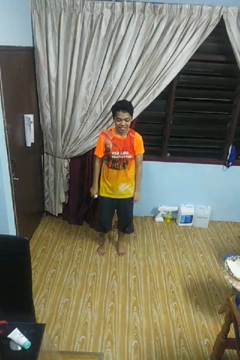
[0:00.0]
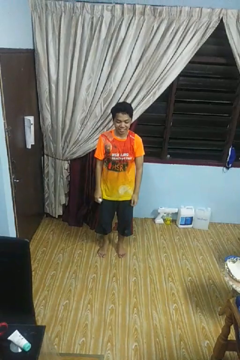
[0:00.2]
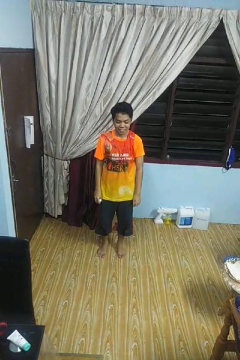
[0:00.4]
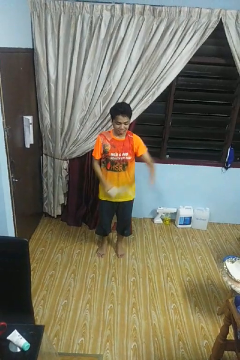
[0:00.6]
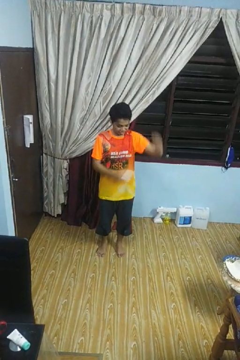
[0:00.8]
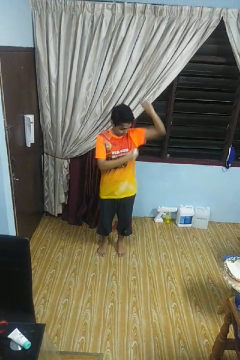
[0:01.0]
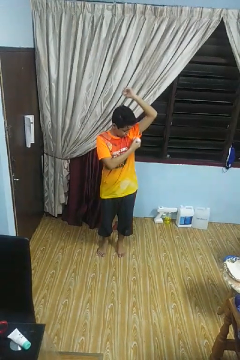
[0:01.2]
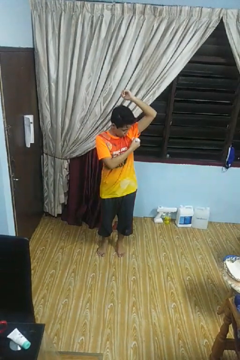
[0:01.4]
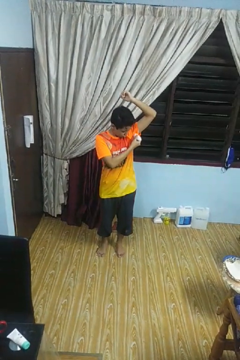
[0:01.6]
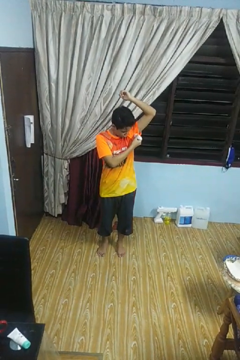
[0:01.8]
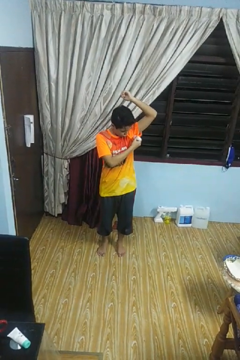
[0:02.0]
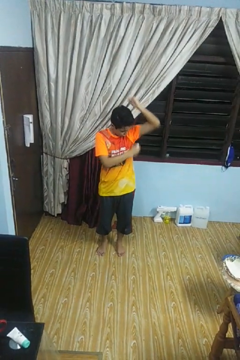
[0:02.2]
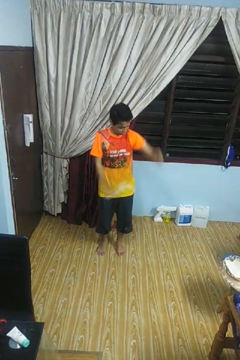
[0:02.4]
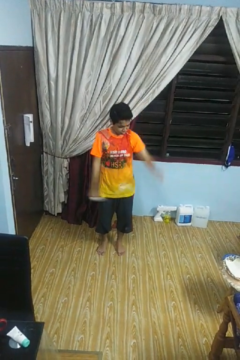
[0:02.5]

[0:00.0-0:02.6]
person applies deodorant

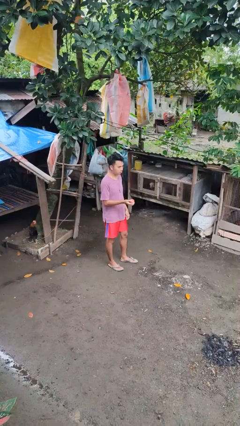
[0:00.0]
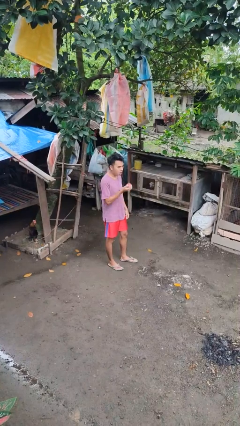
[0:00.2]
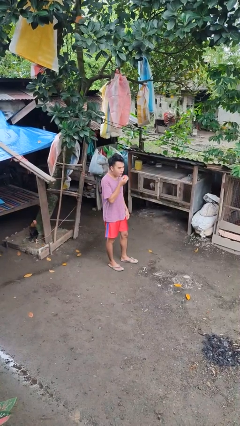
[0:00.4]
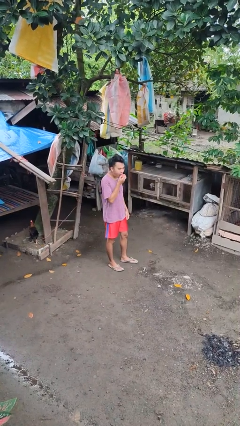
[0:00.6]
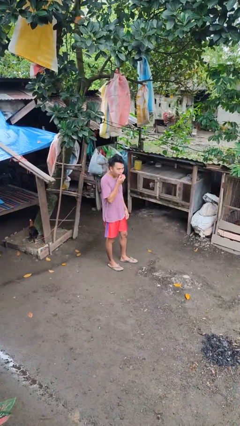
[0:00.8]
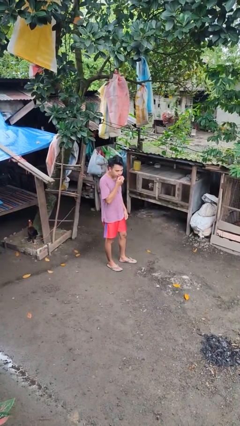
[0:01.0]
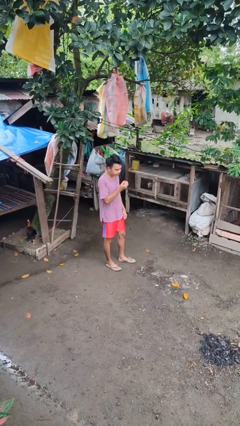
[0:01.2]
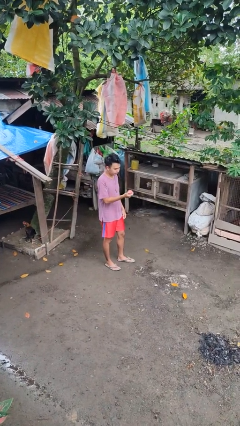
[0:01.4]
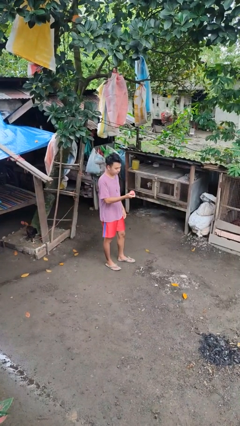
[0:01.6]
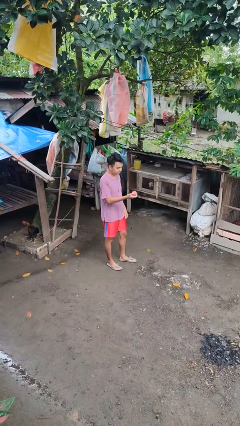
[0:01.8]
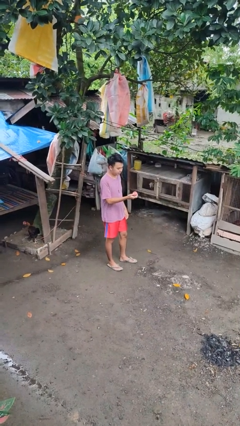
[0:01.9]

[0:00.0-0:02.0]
person eats apple

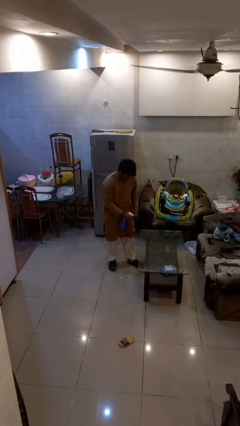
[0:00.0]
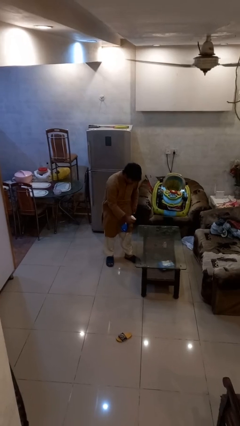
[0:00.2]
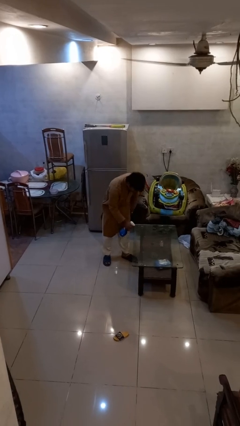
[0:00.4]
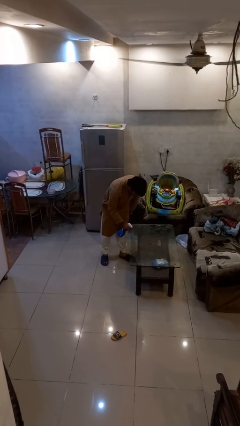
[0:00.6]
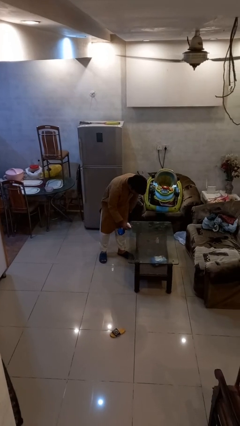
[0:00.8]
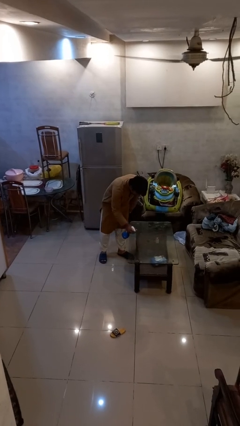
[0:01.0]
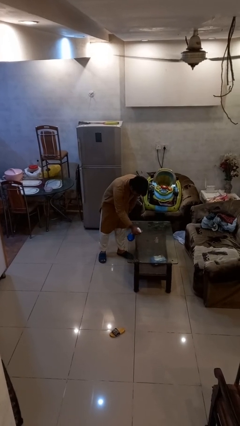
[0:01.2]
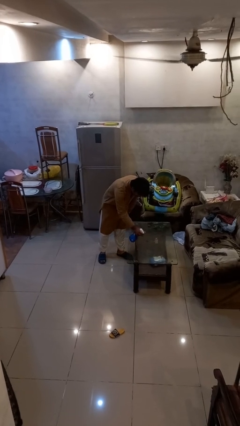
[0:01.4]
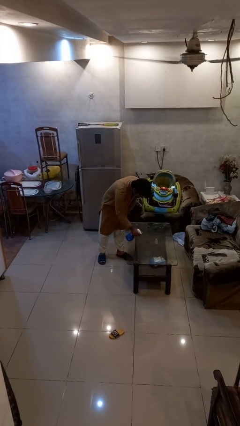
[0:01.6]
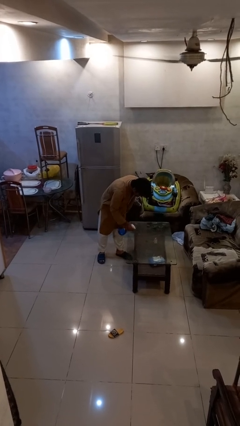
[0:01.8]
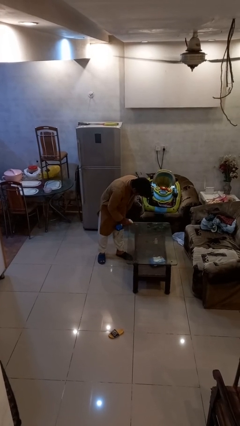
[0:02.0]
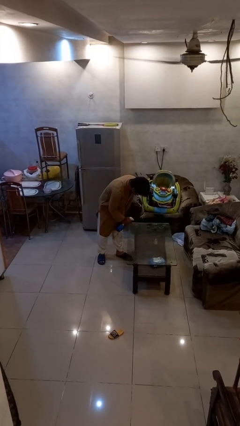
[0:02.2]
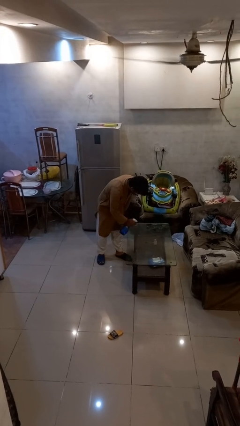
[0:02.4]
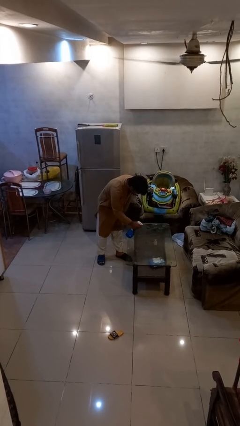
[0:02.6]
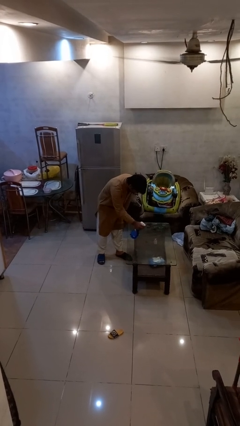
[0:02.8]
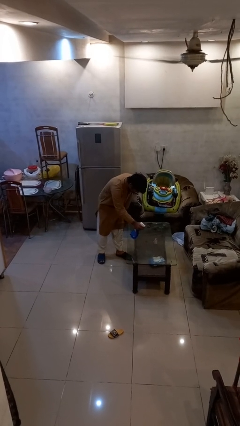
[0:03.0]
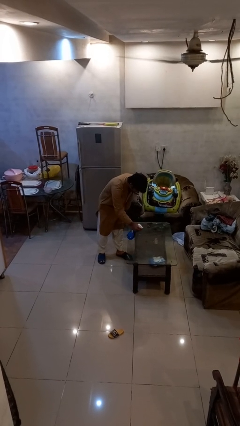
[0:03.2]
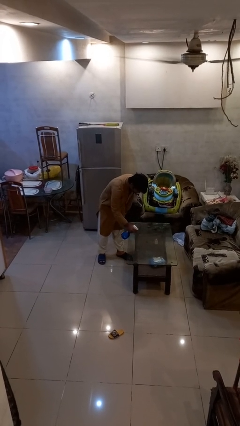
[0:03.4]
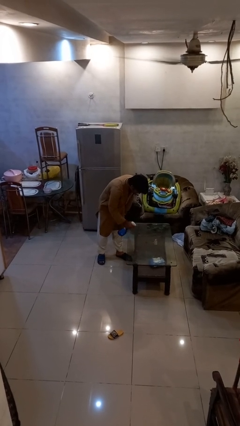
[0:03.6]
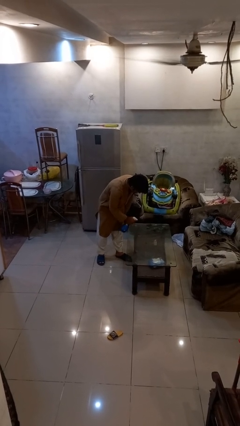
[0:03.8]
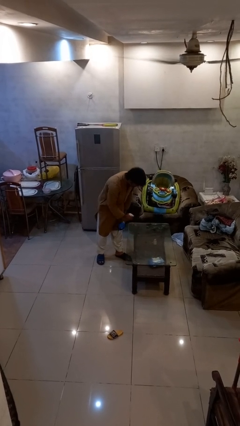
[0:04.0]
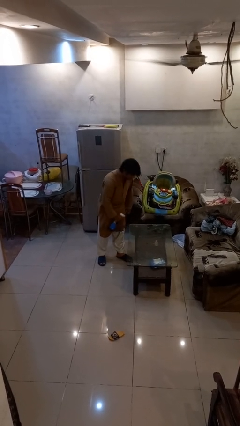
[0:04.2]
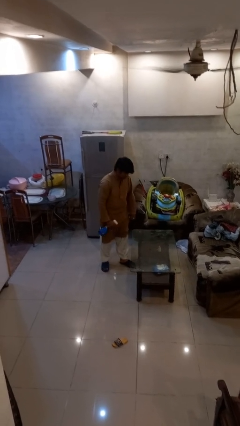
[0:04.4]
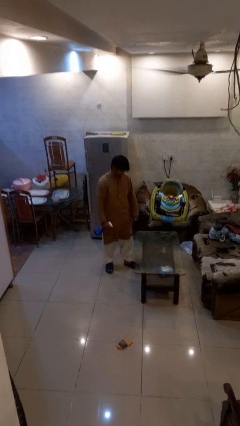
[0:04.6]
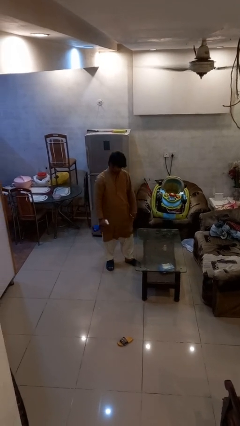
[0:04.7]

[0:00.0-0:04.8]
person sprays from bottle

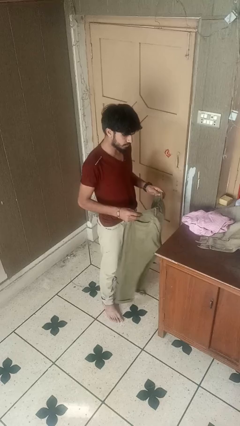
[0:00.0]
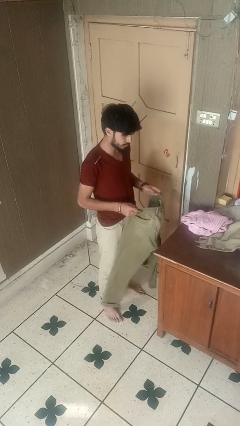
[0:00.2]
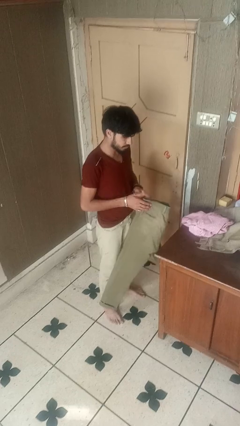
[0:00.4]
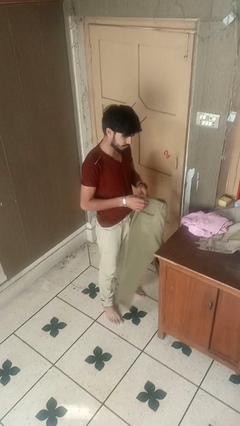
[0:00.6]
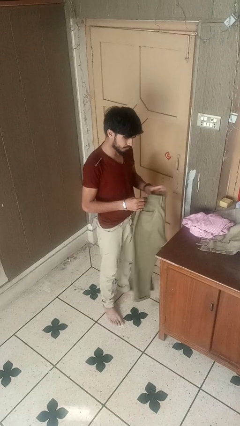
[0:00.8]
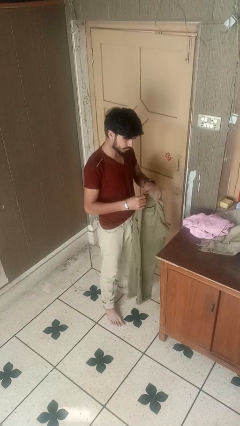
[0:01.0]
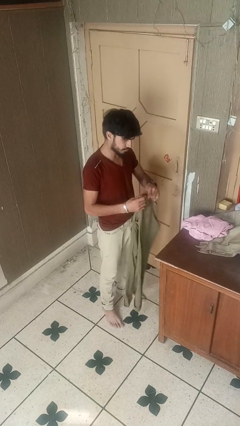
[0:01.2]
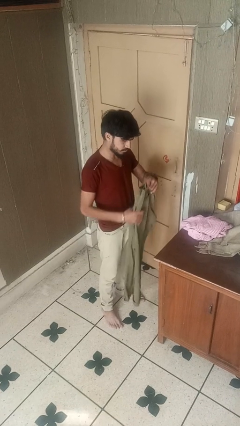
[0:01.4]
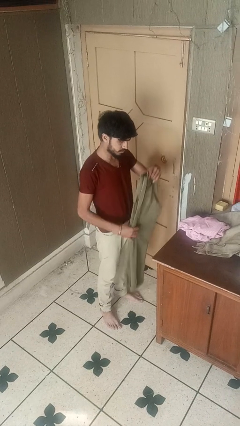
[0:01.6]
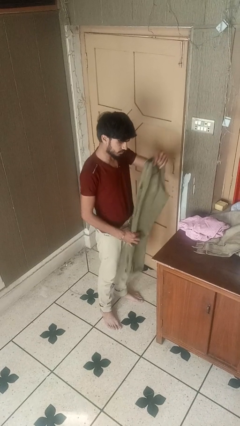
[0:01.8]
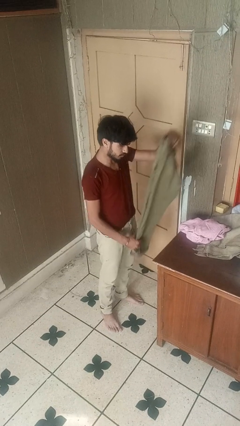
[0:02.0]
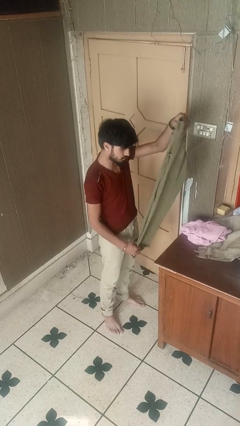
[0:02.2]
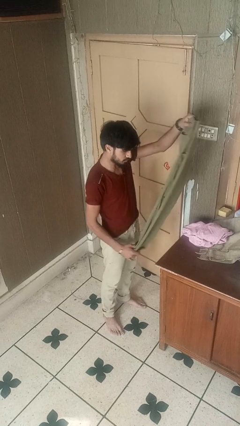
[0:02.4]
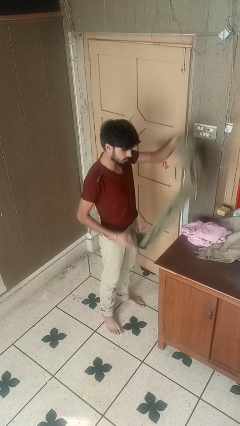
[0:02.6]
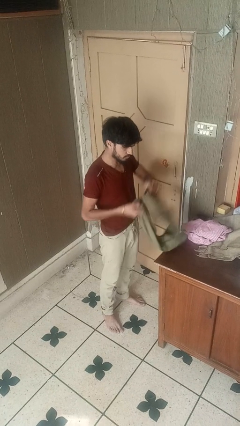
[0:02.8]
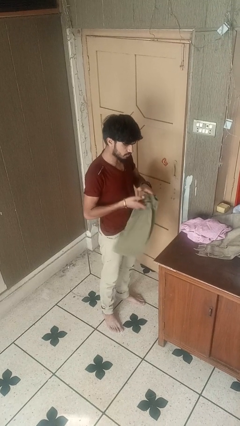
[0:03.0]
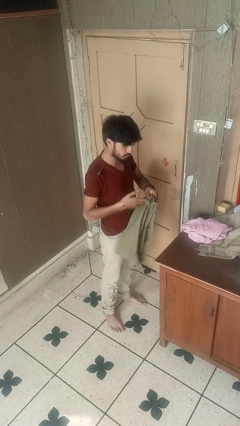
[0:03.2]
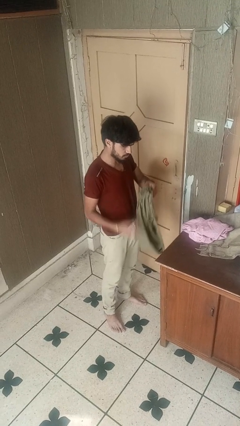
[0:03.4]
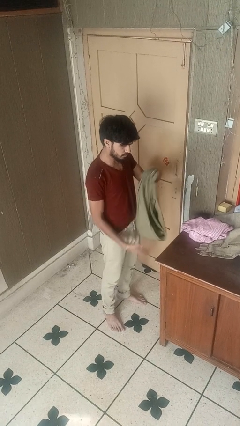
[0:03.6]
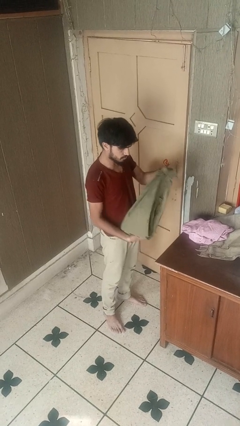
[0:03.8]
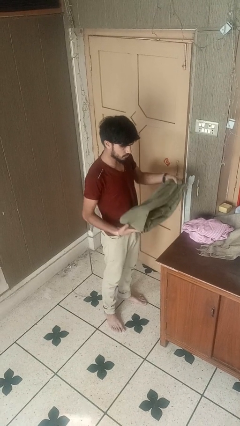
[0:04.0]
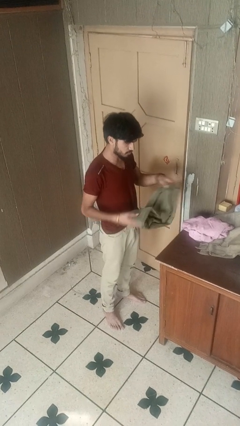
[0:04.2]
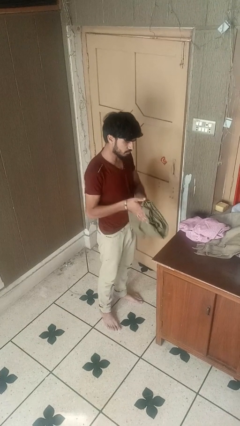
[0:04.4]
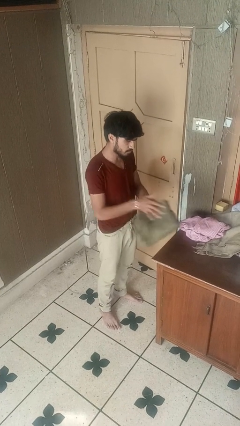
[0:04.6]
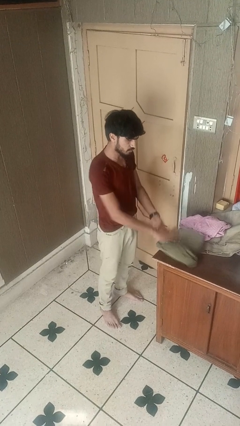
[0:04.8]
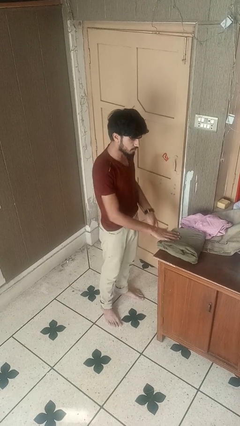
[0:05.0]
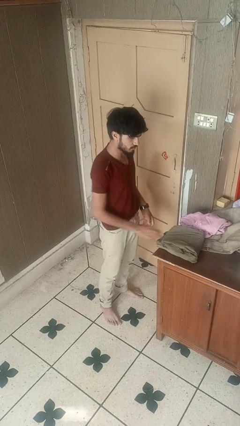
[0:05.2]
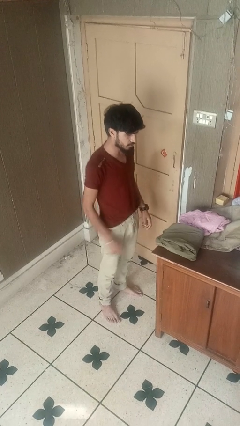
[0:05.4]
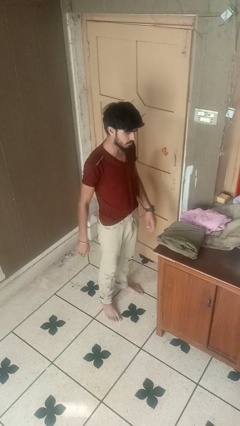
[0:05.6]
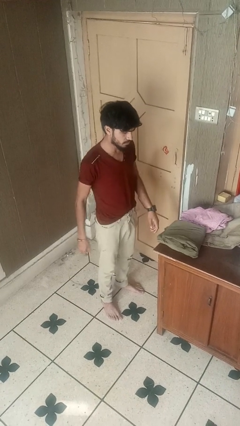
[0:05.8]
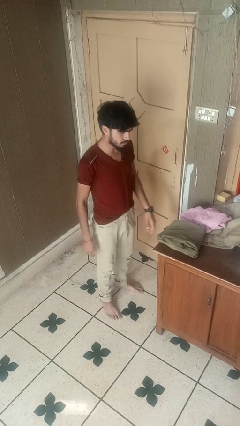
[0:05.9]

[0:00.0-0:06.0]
person folds pants

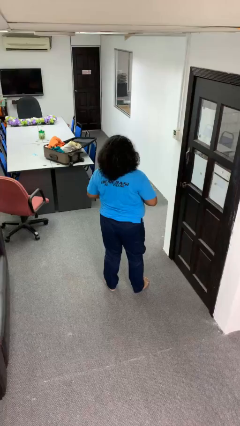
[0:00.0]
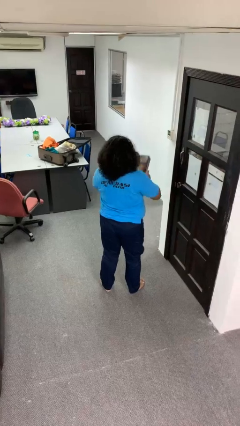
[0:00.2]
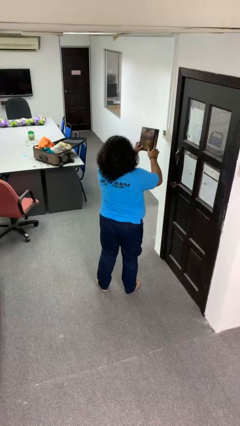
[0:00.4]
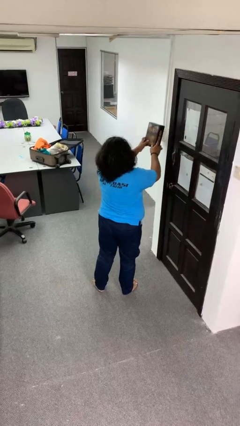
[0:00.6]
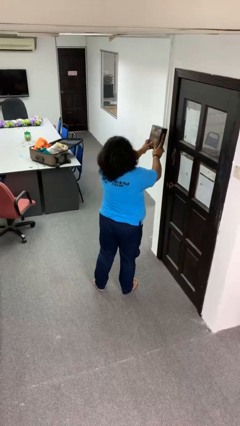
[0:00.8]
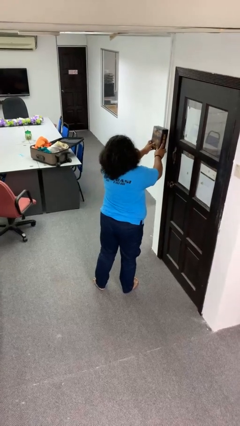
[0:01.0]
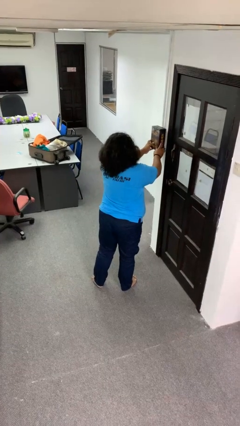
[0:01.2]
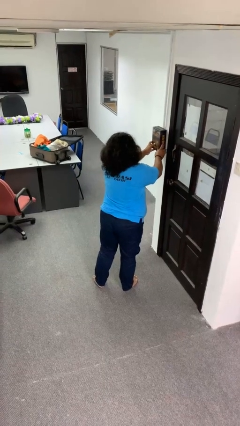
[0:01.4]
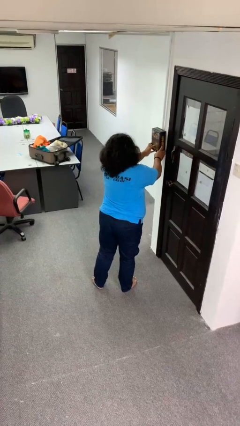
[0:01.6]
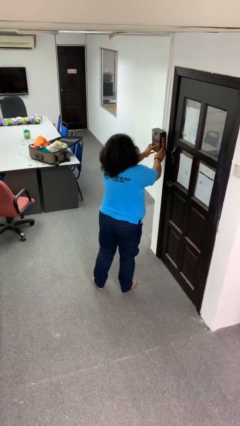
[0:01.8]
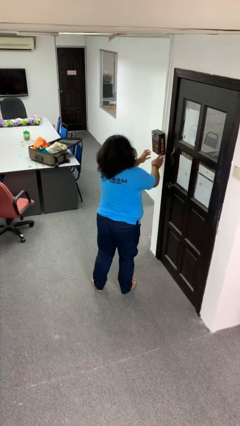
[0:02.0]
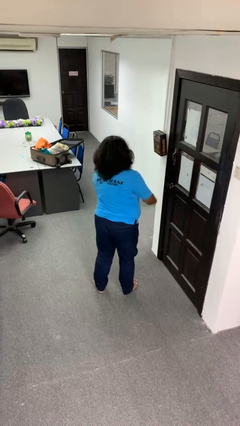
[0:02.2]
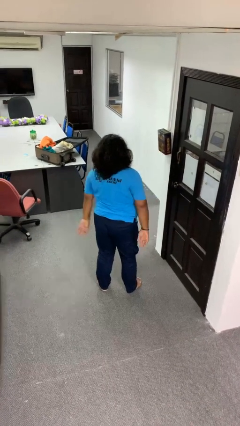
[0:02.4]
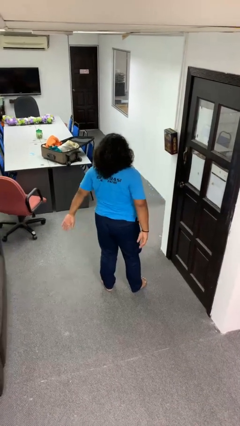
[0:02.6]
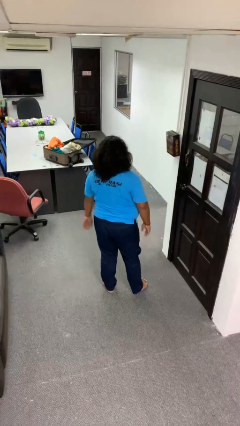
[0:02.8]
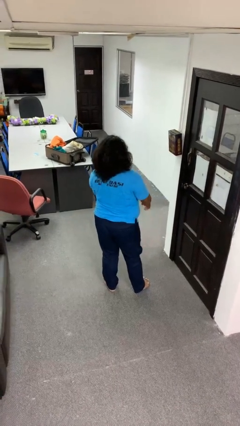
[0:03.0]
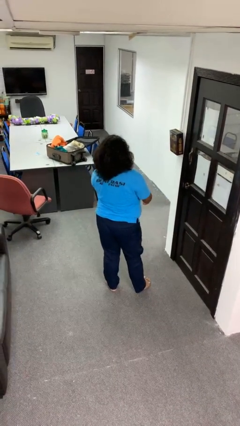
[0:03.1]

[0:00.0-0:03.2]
person puts up picture frame
